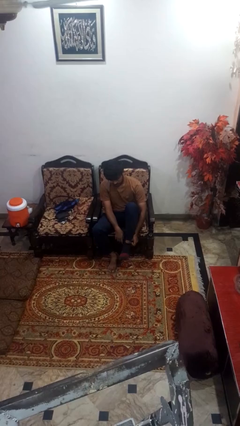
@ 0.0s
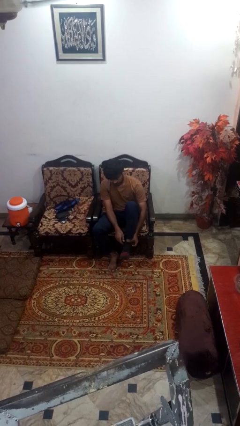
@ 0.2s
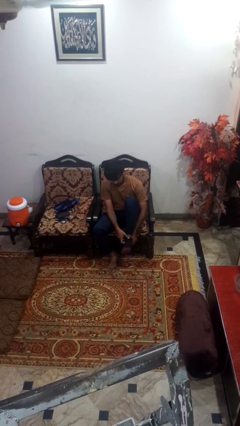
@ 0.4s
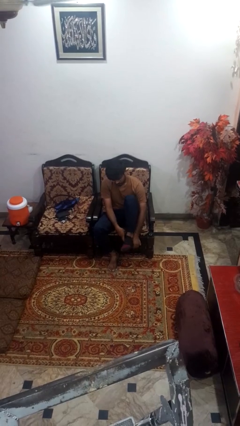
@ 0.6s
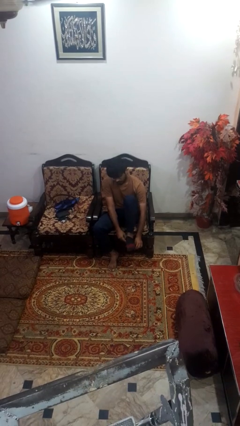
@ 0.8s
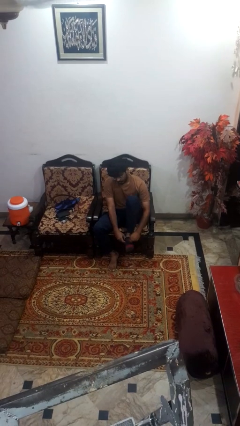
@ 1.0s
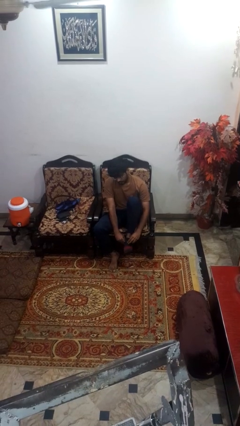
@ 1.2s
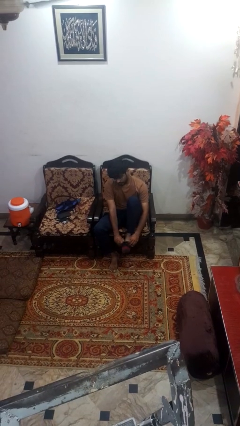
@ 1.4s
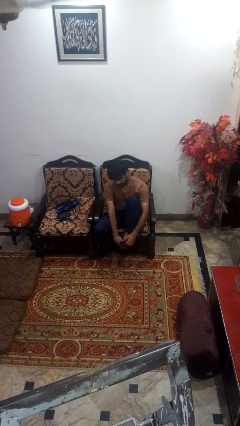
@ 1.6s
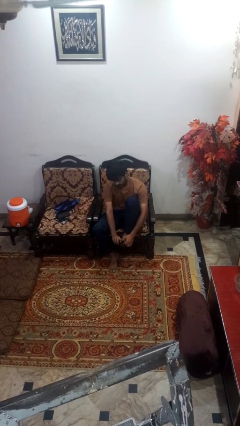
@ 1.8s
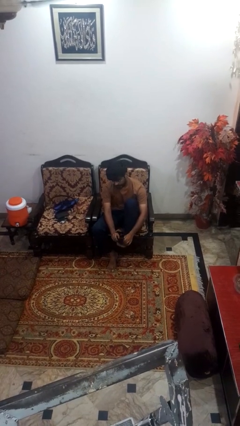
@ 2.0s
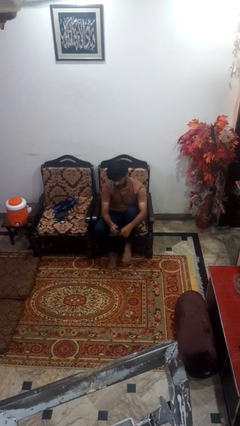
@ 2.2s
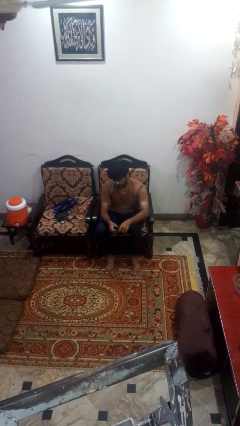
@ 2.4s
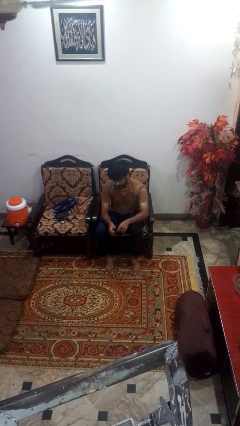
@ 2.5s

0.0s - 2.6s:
person takes off socks

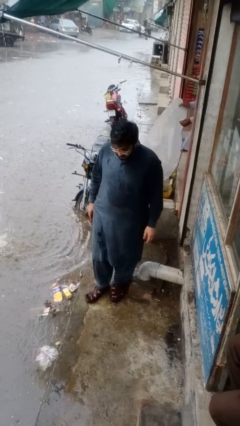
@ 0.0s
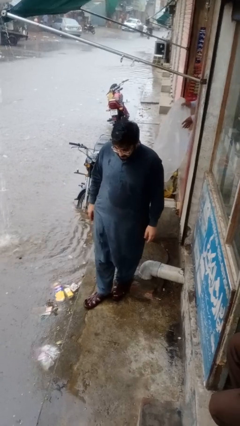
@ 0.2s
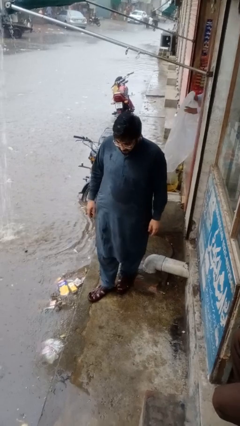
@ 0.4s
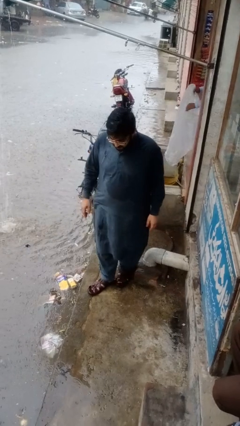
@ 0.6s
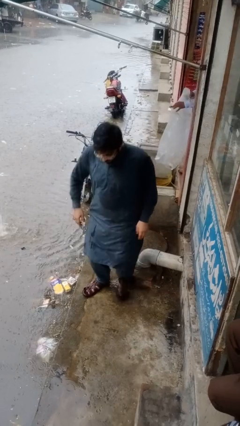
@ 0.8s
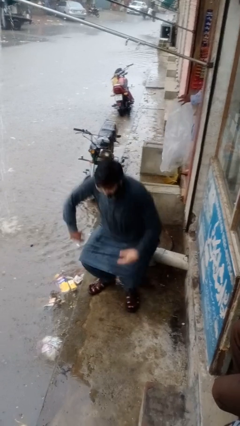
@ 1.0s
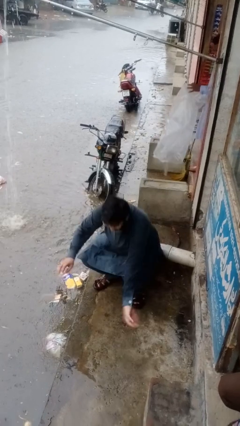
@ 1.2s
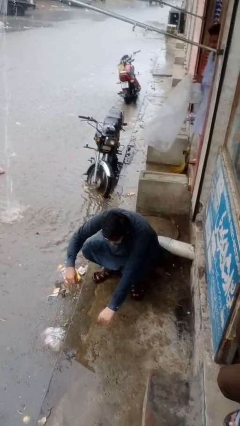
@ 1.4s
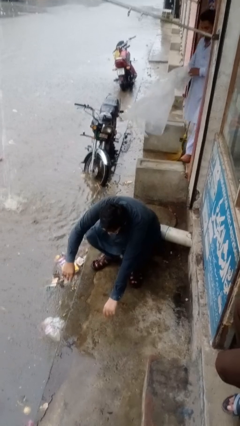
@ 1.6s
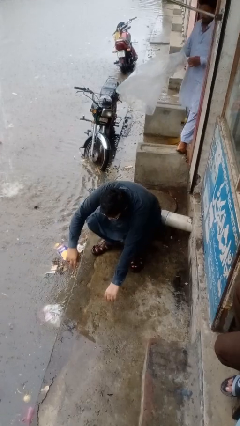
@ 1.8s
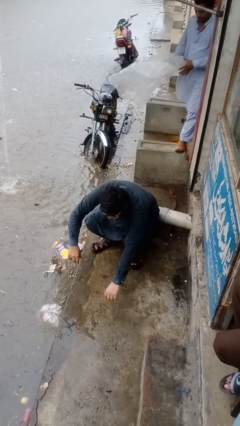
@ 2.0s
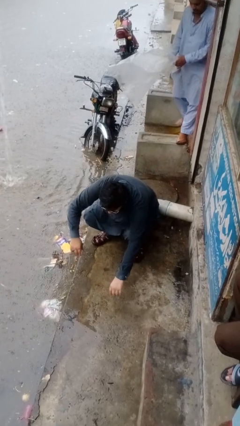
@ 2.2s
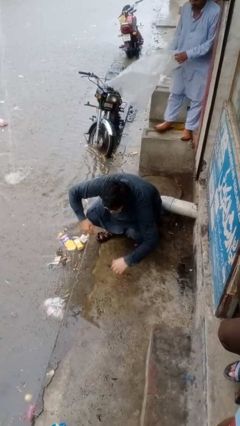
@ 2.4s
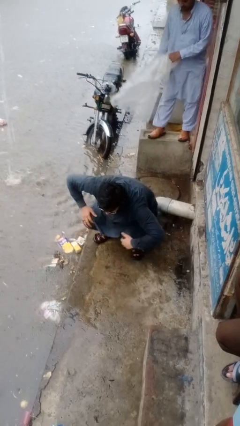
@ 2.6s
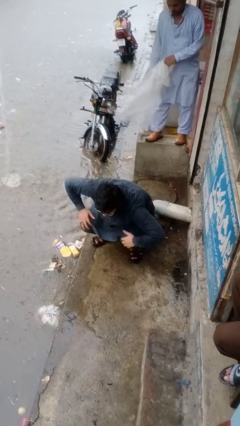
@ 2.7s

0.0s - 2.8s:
person lies down on floor

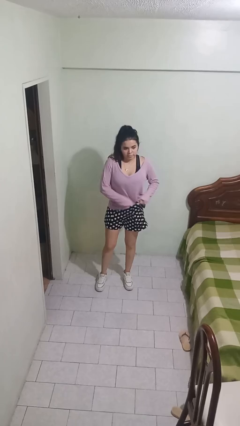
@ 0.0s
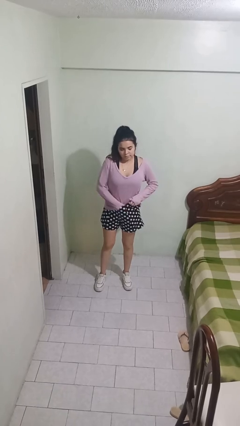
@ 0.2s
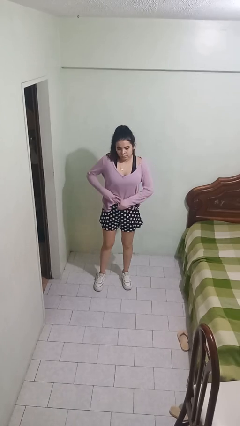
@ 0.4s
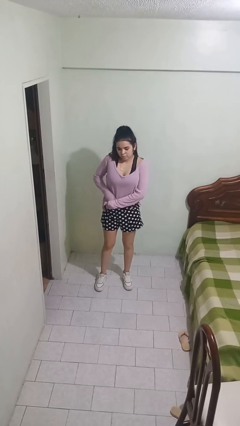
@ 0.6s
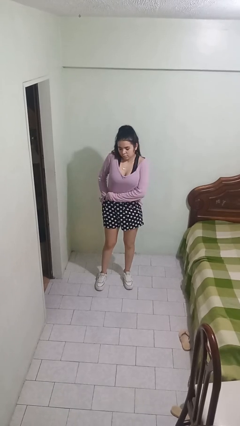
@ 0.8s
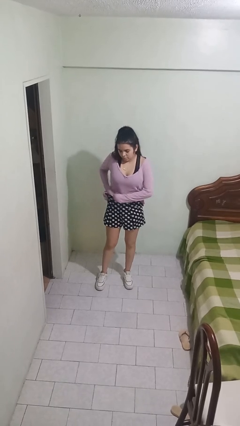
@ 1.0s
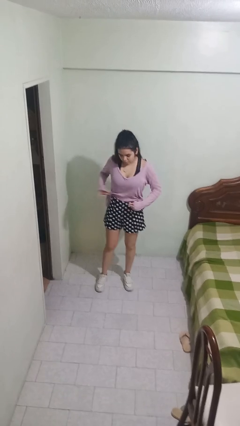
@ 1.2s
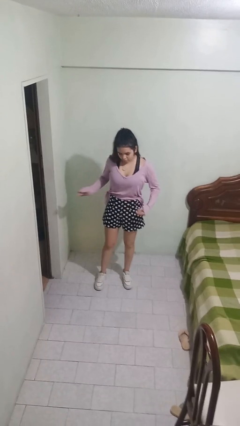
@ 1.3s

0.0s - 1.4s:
person tucks in shirt

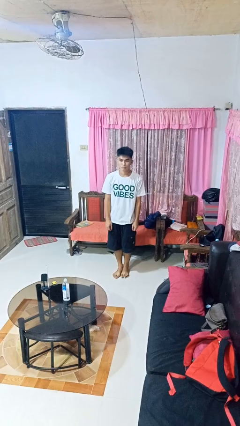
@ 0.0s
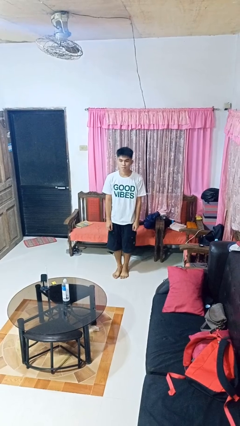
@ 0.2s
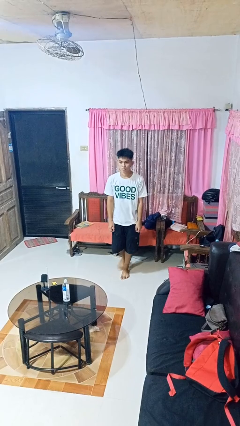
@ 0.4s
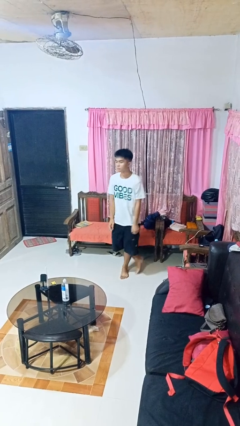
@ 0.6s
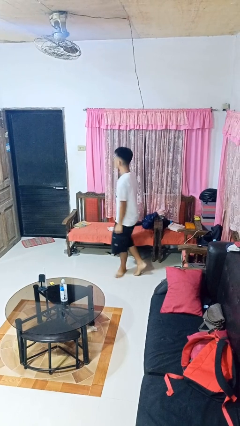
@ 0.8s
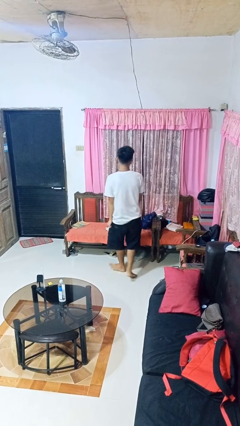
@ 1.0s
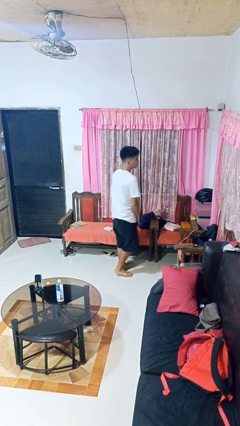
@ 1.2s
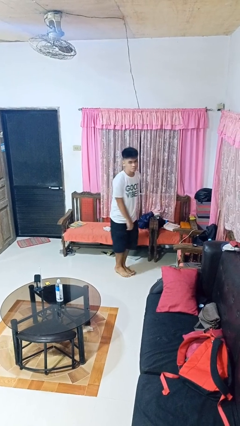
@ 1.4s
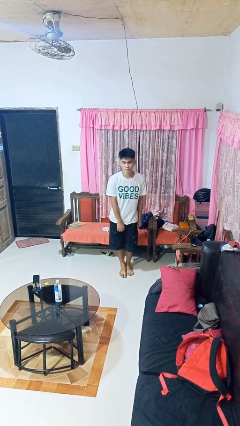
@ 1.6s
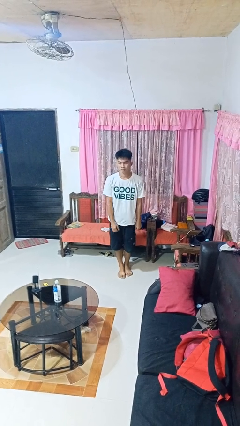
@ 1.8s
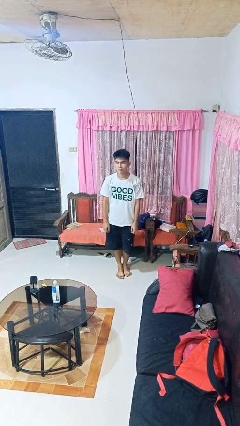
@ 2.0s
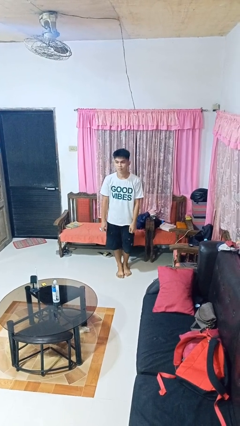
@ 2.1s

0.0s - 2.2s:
person twirls

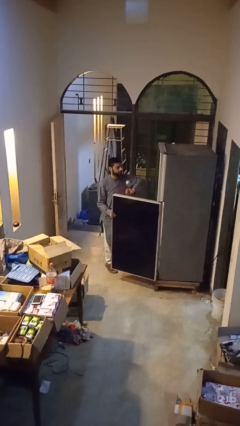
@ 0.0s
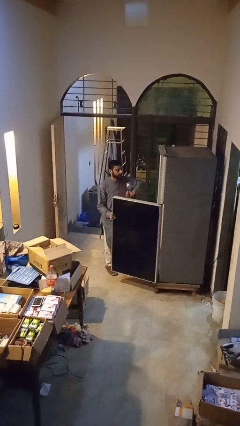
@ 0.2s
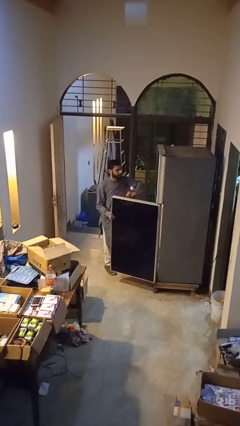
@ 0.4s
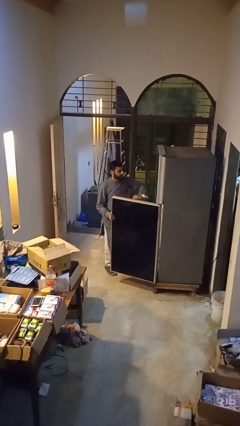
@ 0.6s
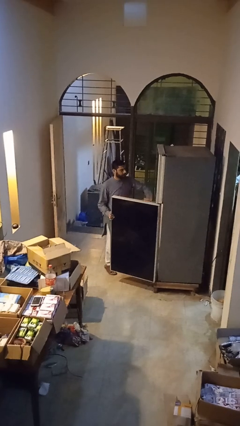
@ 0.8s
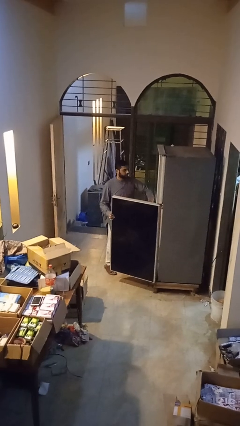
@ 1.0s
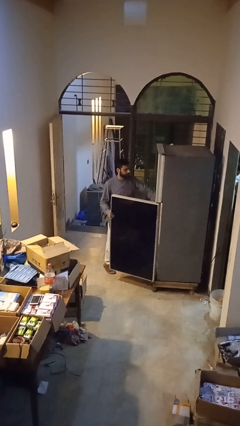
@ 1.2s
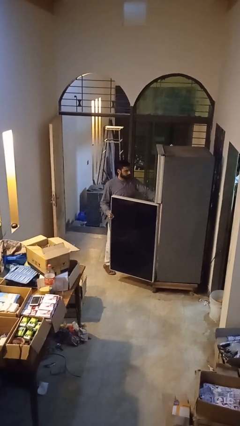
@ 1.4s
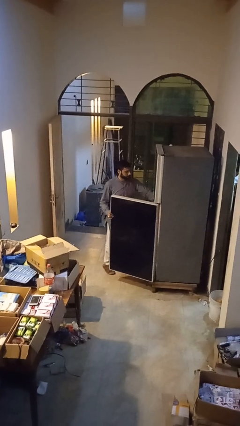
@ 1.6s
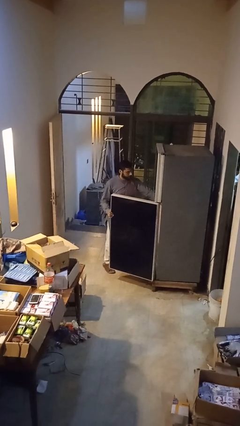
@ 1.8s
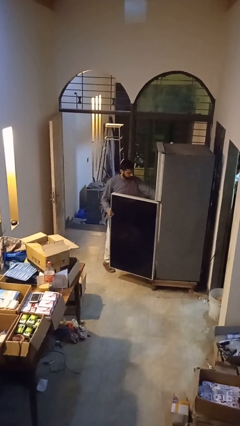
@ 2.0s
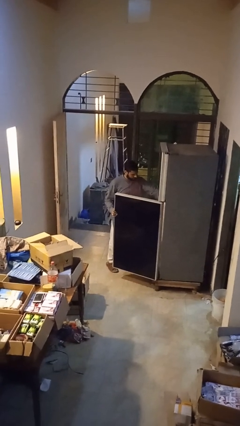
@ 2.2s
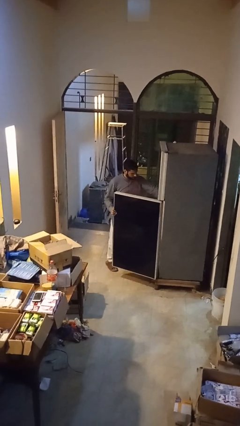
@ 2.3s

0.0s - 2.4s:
person takes object from refrigerator

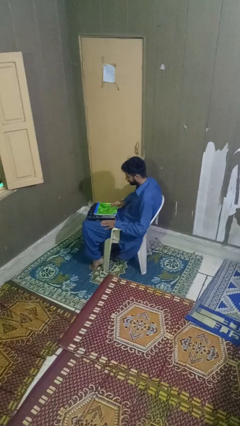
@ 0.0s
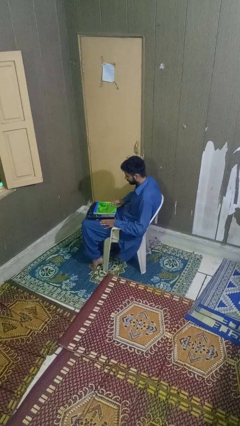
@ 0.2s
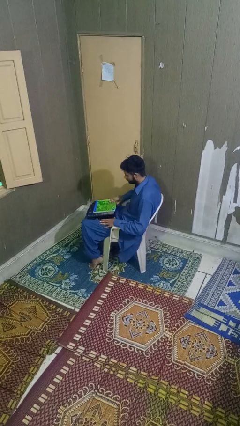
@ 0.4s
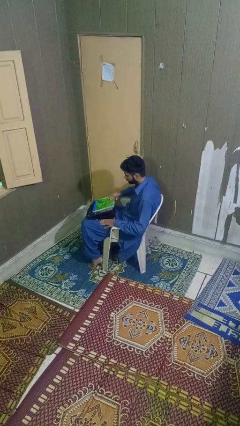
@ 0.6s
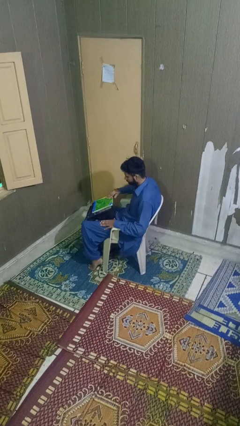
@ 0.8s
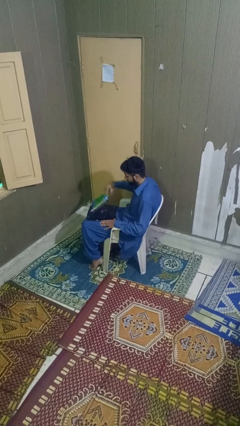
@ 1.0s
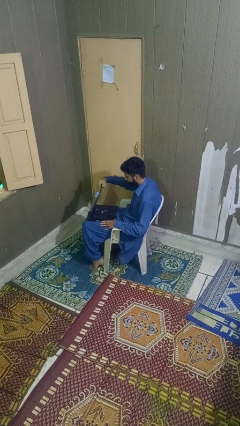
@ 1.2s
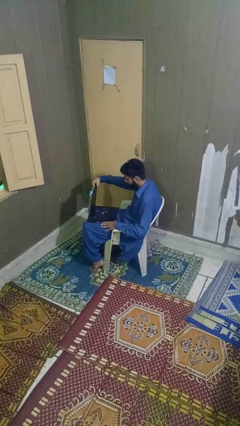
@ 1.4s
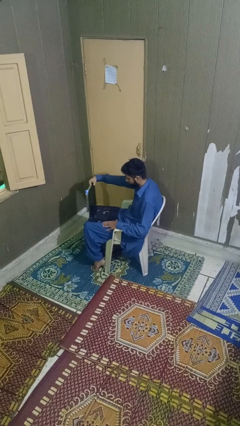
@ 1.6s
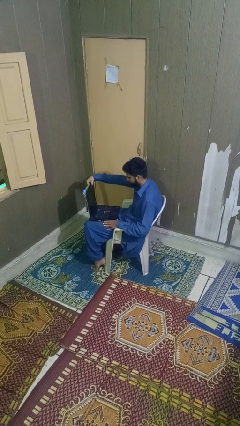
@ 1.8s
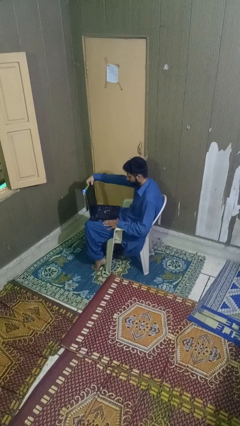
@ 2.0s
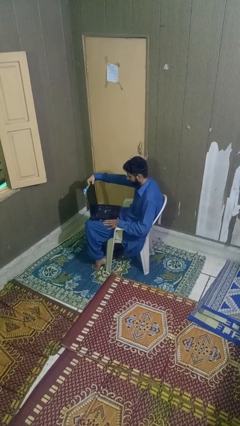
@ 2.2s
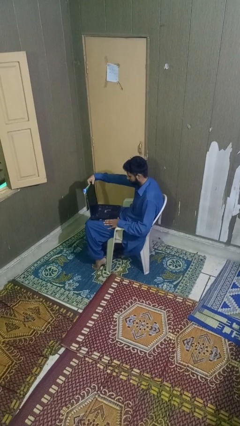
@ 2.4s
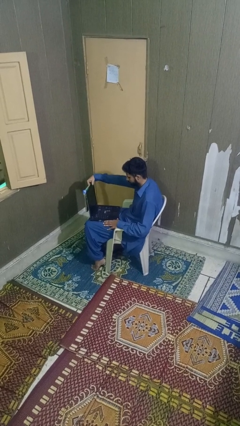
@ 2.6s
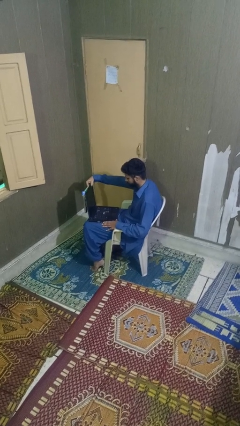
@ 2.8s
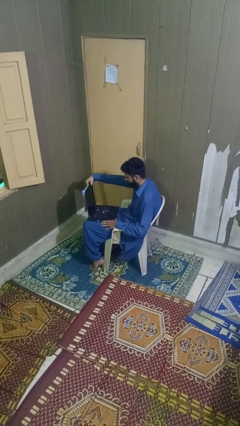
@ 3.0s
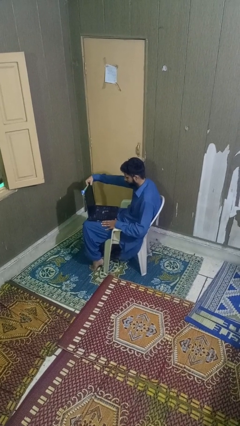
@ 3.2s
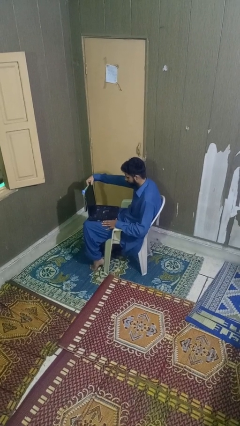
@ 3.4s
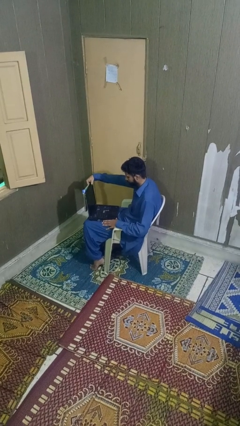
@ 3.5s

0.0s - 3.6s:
person opens laptop

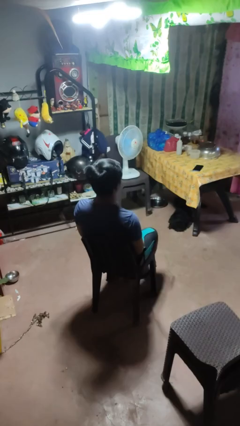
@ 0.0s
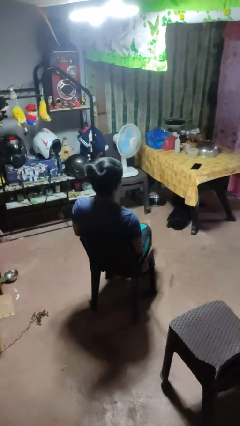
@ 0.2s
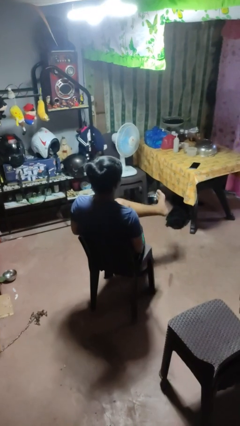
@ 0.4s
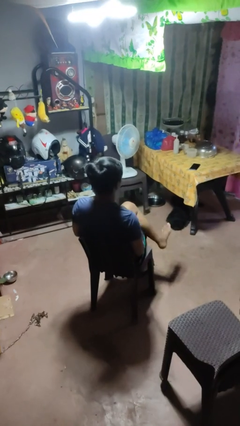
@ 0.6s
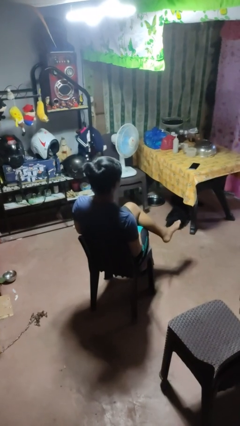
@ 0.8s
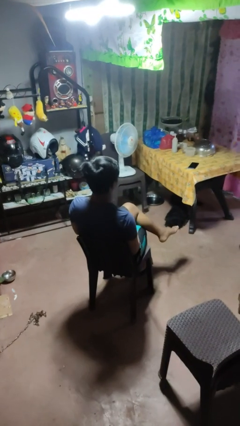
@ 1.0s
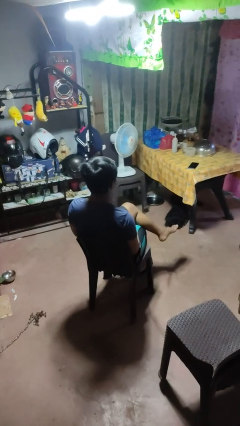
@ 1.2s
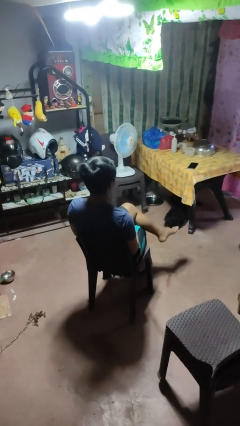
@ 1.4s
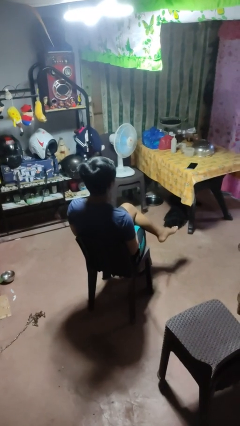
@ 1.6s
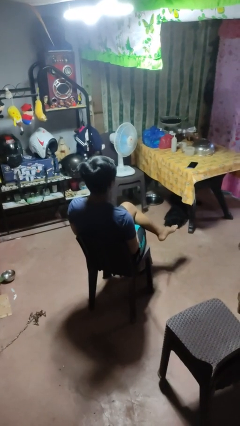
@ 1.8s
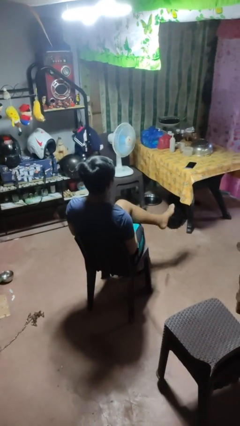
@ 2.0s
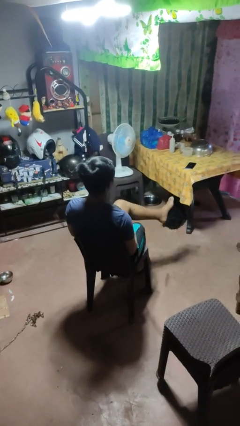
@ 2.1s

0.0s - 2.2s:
person crosses legs
